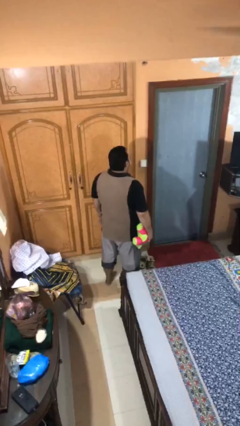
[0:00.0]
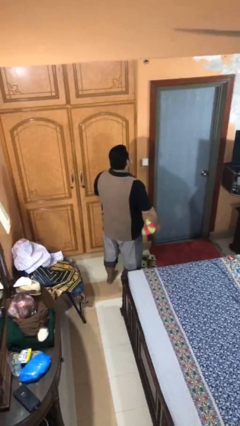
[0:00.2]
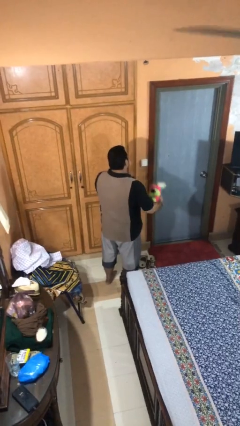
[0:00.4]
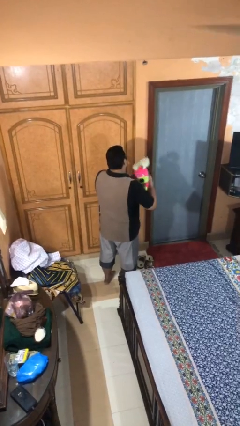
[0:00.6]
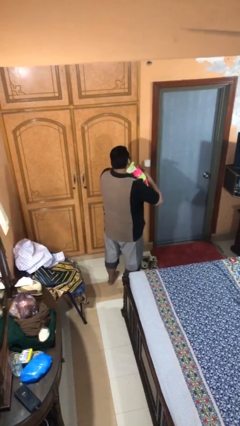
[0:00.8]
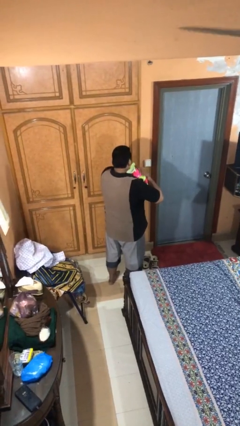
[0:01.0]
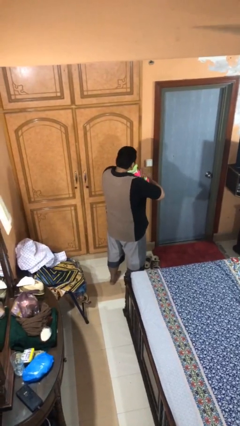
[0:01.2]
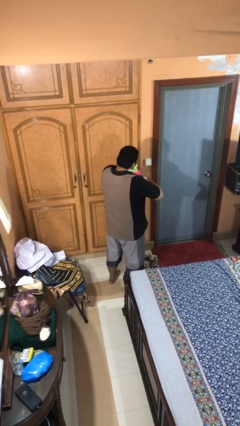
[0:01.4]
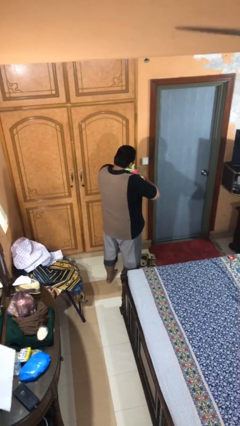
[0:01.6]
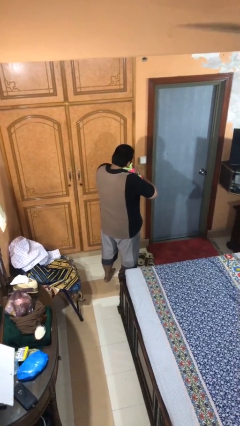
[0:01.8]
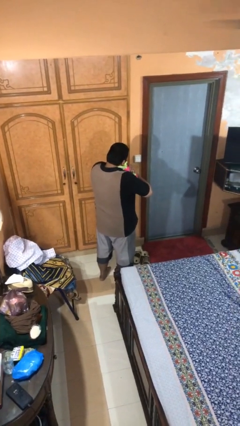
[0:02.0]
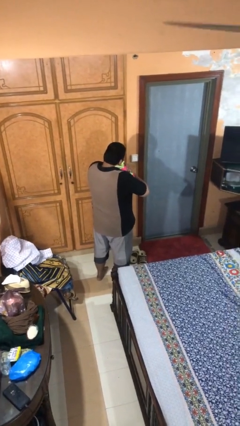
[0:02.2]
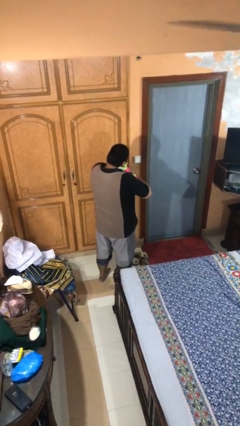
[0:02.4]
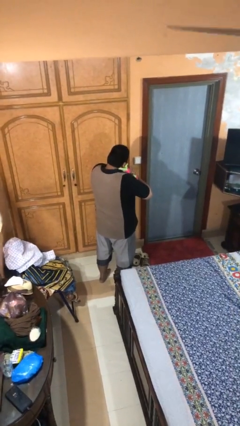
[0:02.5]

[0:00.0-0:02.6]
person hugs stuffed animal

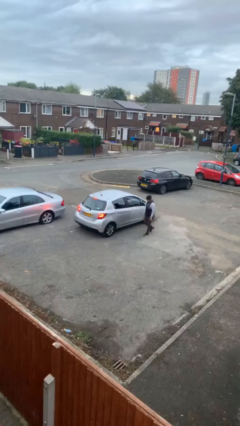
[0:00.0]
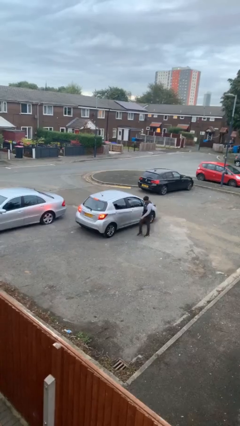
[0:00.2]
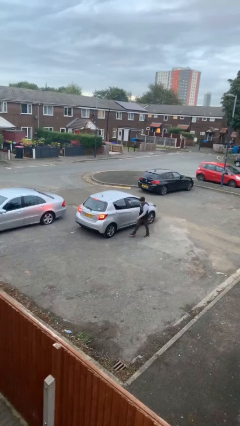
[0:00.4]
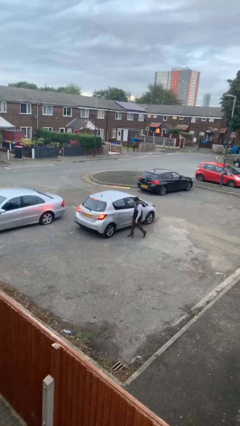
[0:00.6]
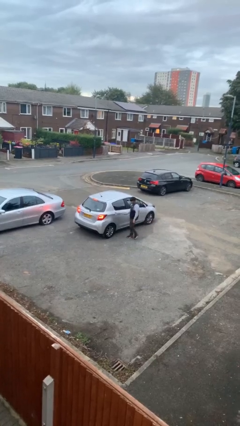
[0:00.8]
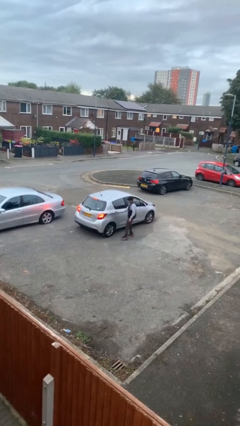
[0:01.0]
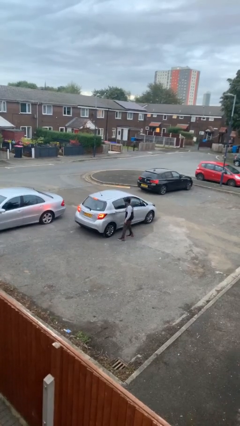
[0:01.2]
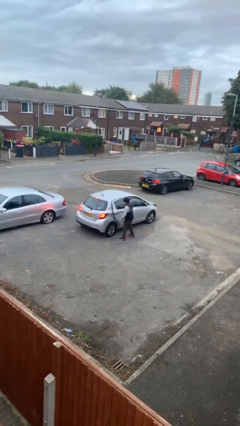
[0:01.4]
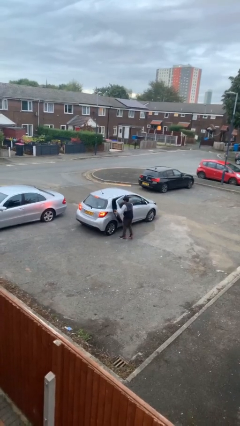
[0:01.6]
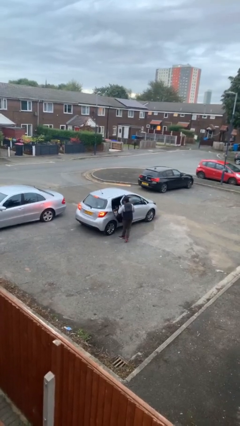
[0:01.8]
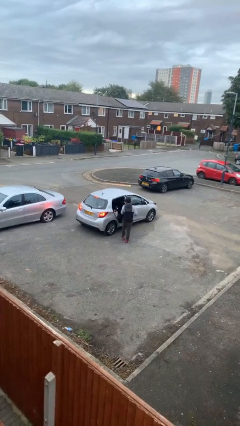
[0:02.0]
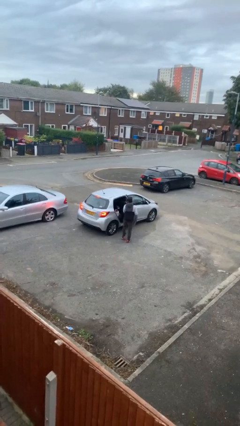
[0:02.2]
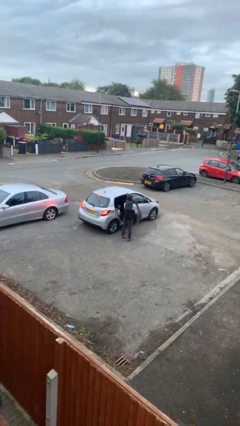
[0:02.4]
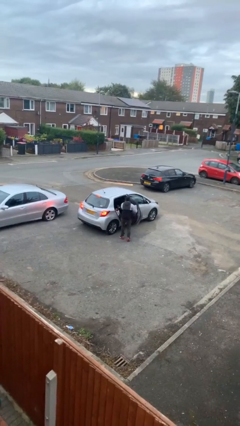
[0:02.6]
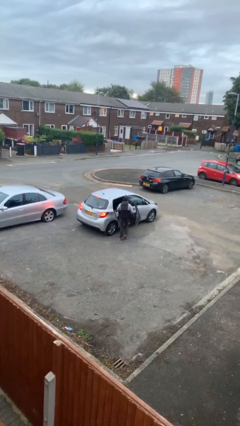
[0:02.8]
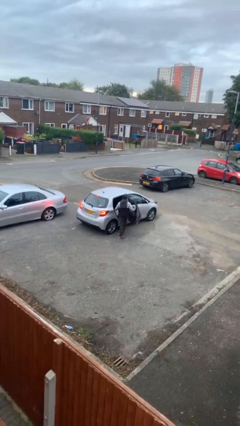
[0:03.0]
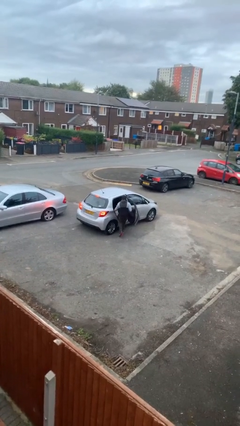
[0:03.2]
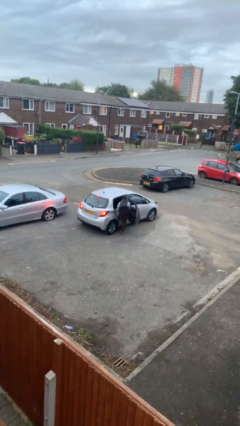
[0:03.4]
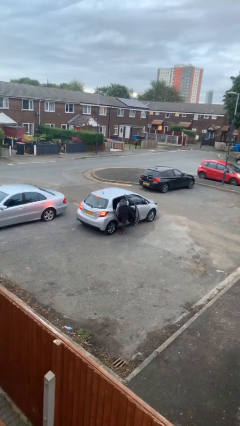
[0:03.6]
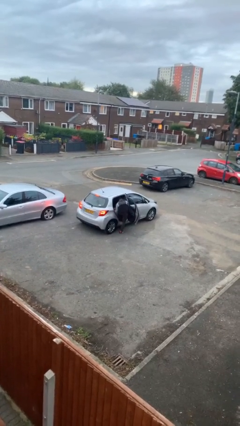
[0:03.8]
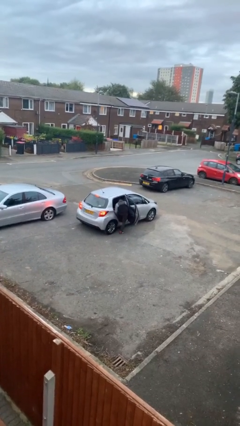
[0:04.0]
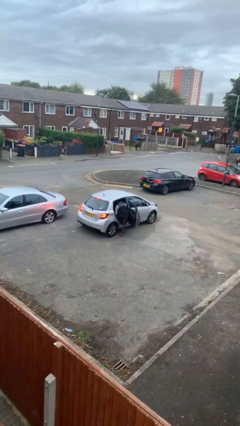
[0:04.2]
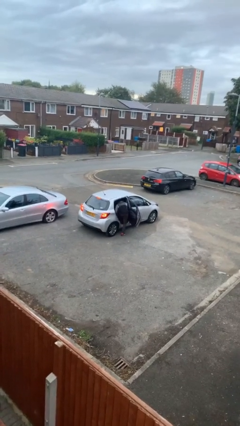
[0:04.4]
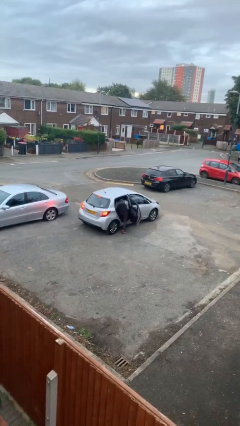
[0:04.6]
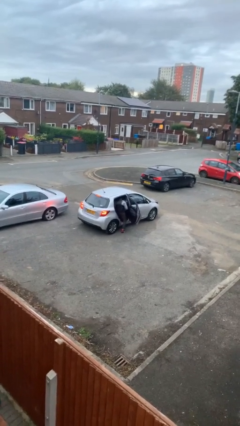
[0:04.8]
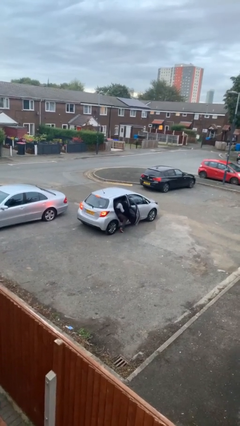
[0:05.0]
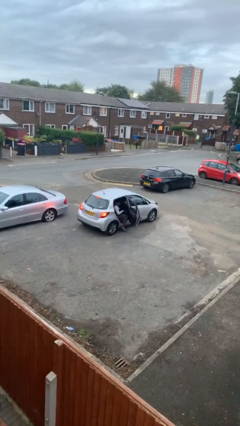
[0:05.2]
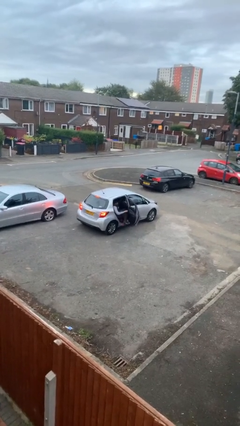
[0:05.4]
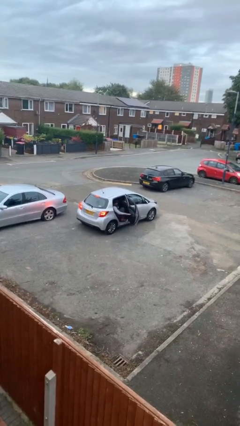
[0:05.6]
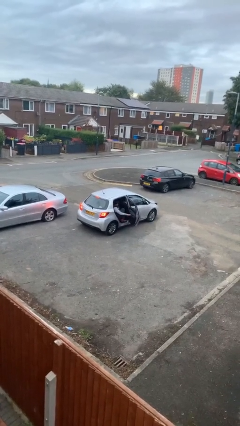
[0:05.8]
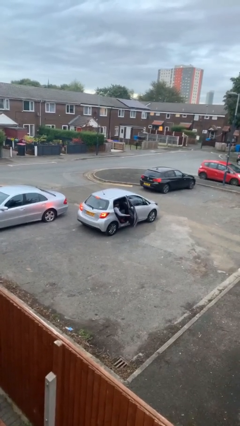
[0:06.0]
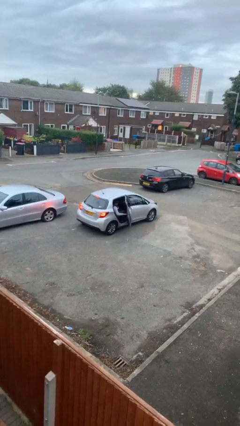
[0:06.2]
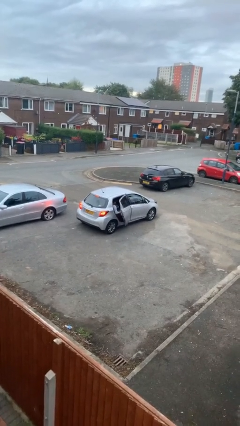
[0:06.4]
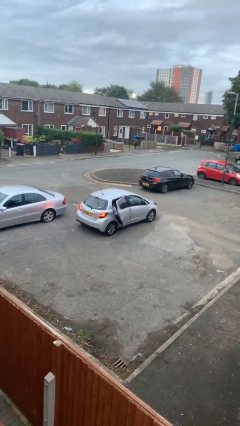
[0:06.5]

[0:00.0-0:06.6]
car picks up person

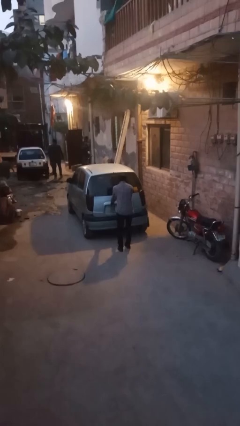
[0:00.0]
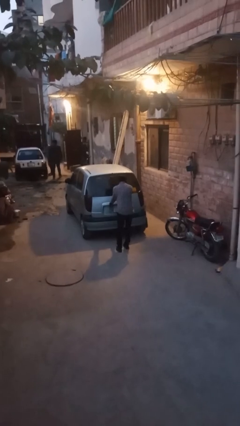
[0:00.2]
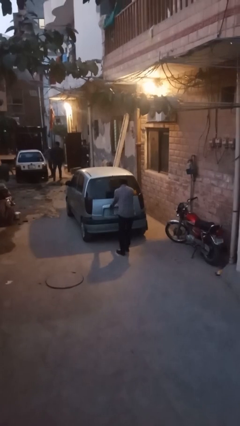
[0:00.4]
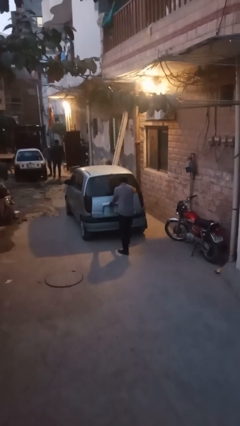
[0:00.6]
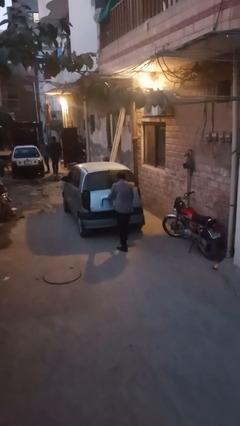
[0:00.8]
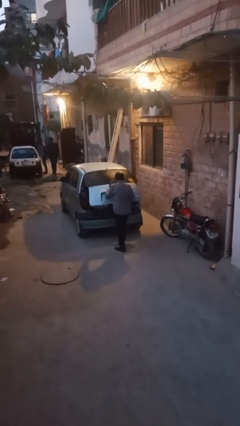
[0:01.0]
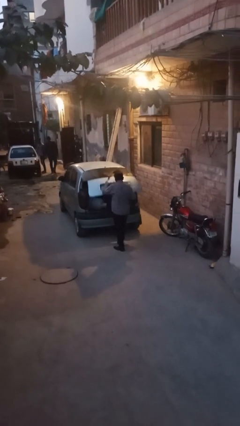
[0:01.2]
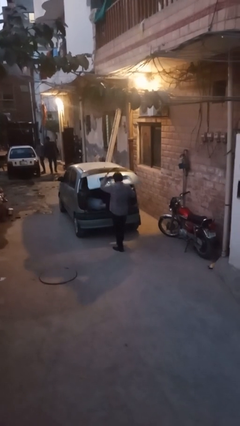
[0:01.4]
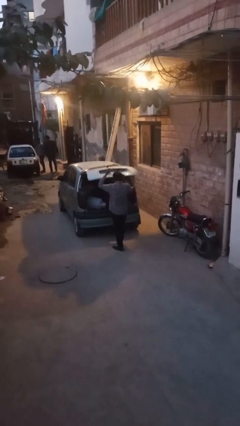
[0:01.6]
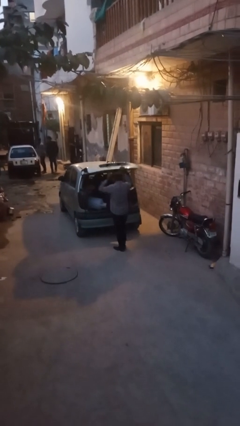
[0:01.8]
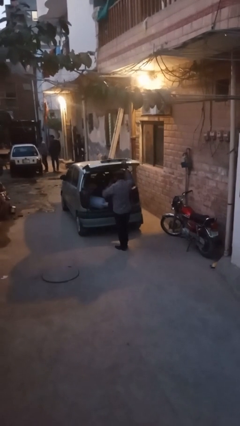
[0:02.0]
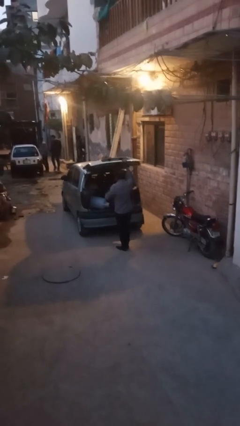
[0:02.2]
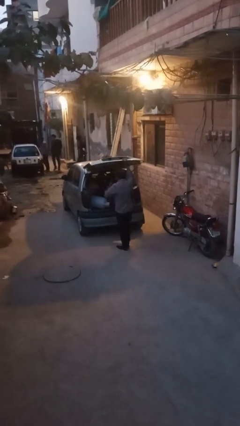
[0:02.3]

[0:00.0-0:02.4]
person opens car trunk

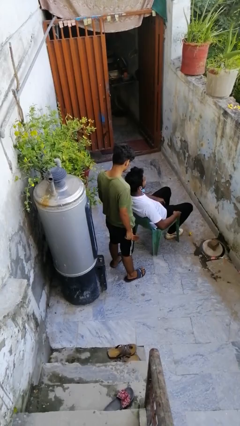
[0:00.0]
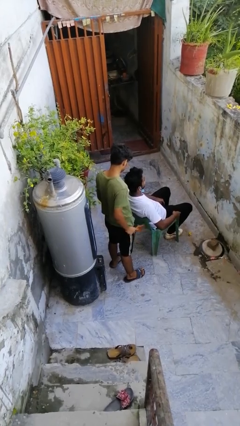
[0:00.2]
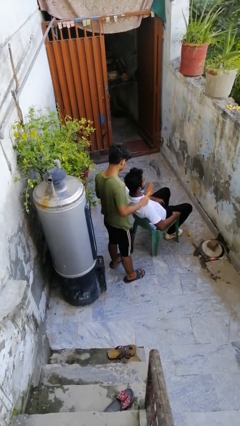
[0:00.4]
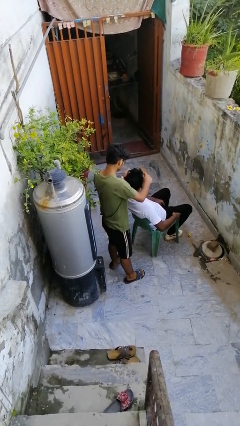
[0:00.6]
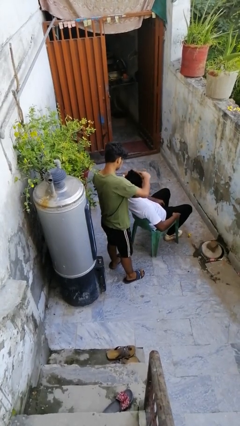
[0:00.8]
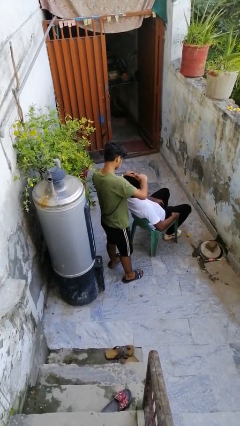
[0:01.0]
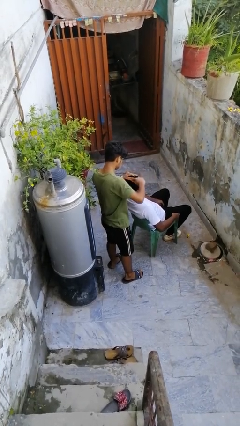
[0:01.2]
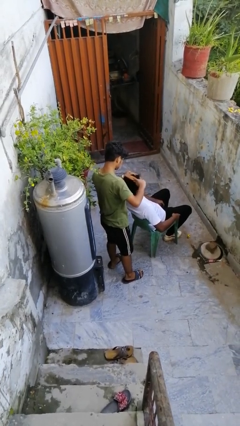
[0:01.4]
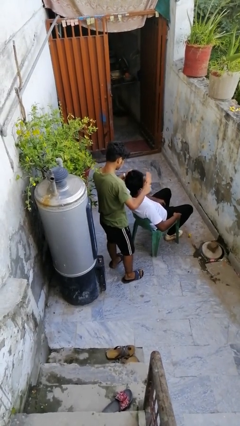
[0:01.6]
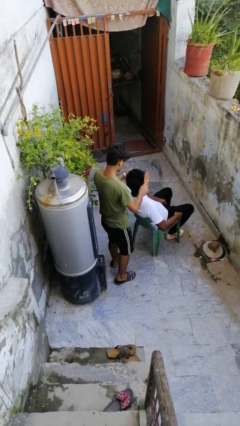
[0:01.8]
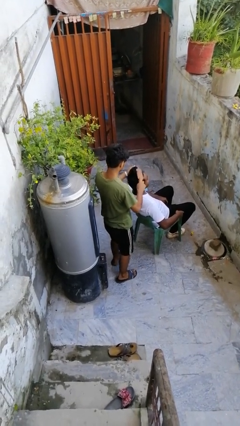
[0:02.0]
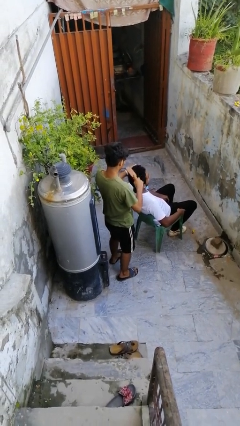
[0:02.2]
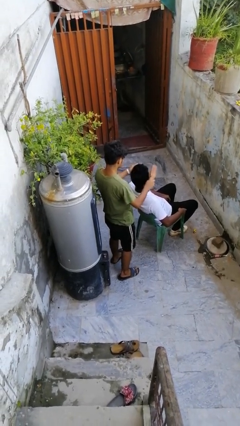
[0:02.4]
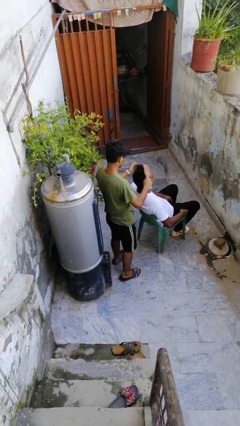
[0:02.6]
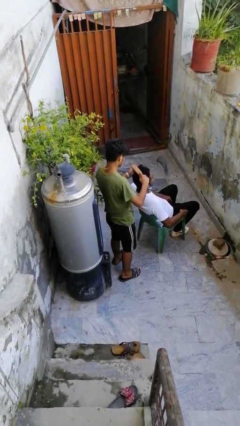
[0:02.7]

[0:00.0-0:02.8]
person brushes hair of person

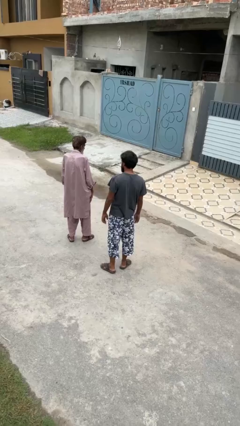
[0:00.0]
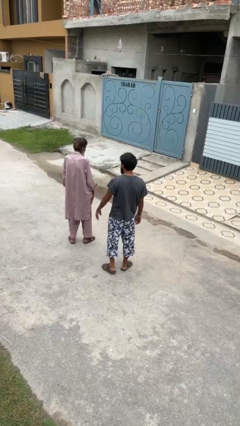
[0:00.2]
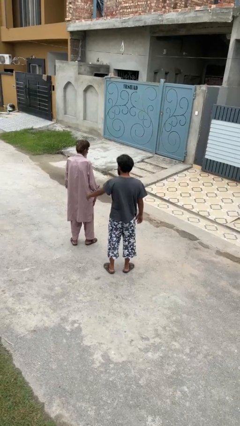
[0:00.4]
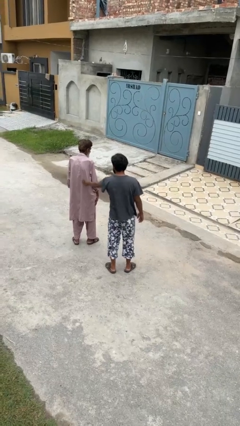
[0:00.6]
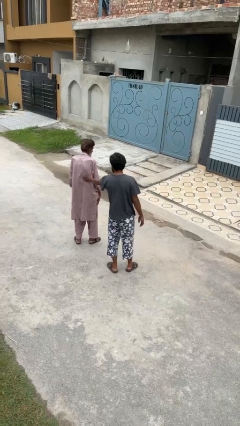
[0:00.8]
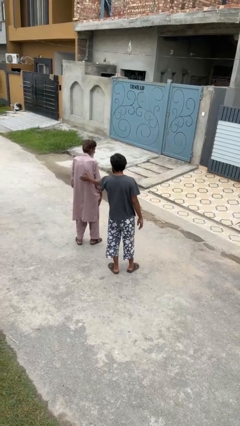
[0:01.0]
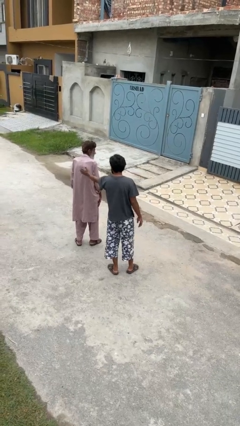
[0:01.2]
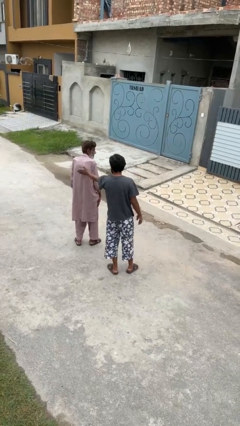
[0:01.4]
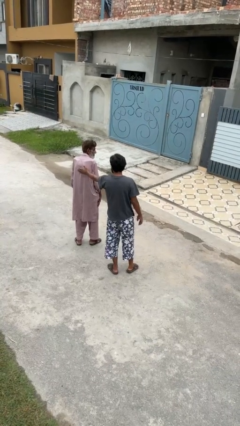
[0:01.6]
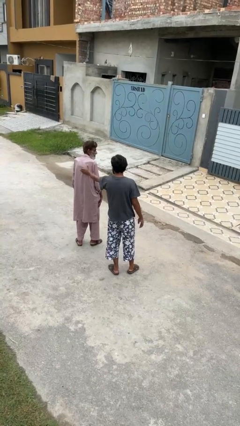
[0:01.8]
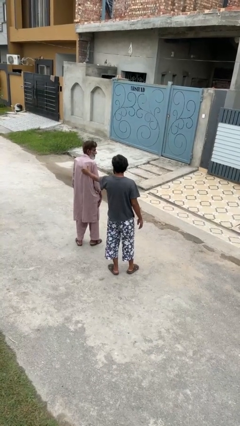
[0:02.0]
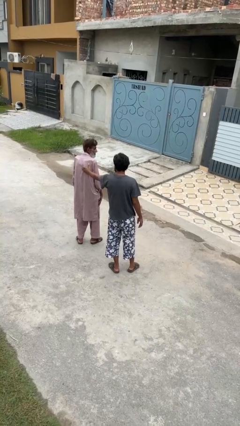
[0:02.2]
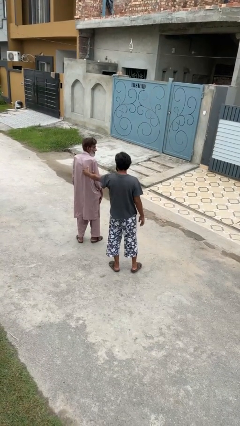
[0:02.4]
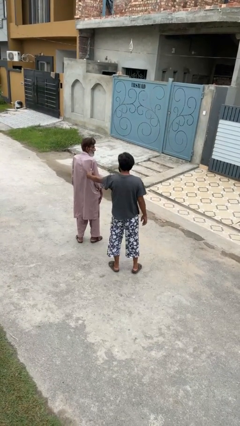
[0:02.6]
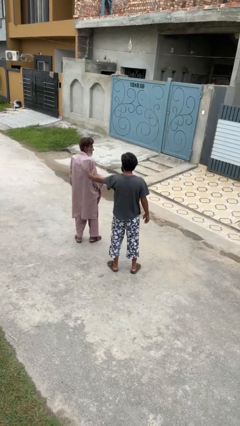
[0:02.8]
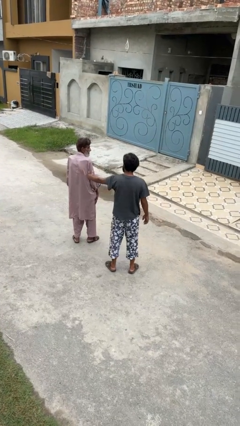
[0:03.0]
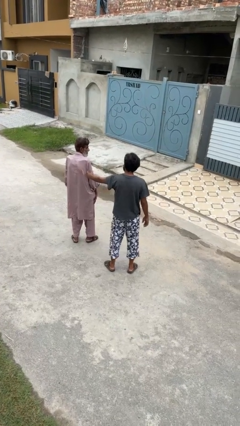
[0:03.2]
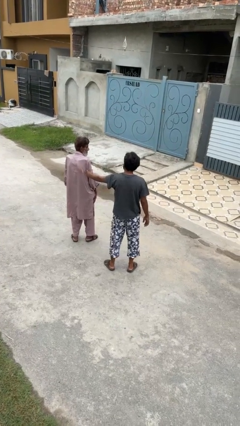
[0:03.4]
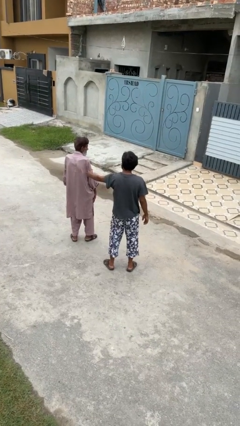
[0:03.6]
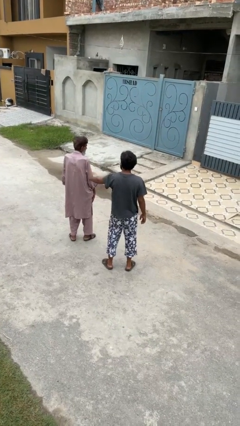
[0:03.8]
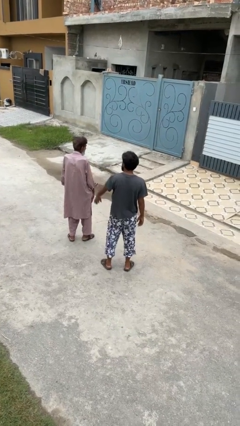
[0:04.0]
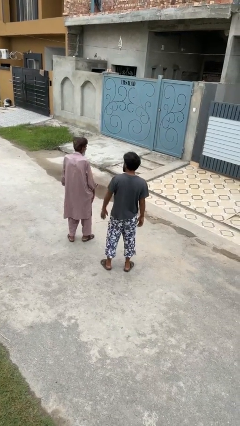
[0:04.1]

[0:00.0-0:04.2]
person touches back of person
